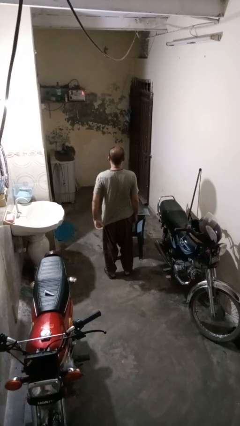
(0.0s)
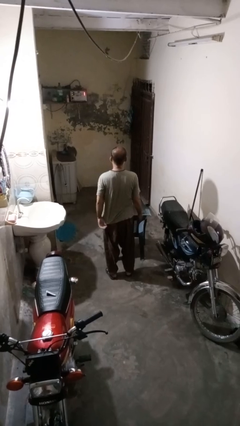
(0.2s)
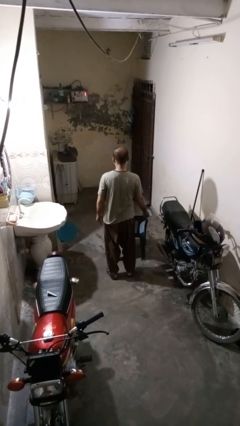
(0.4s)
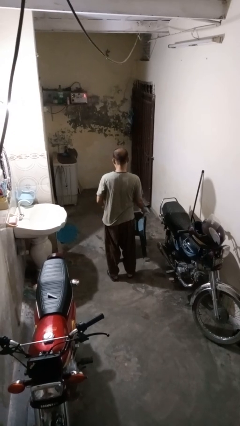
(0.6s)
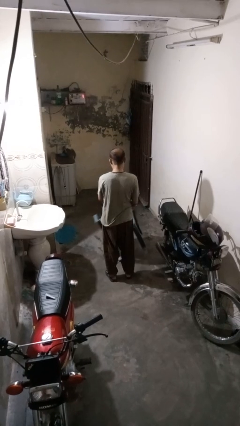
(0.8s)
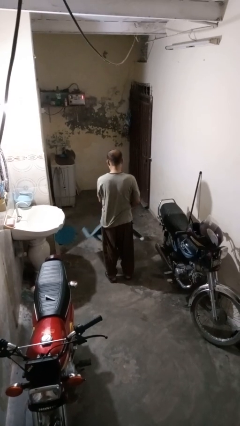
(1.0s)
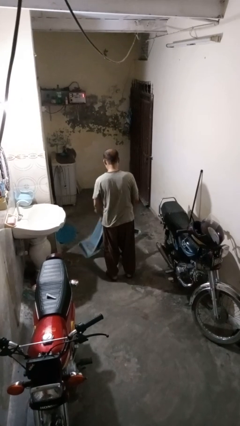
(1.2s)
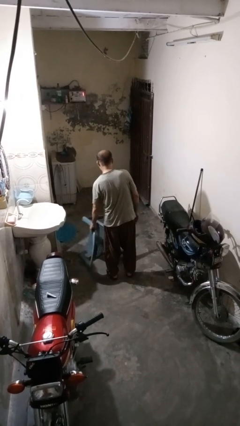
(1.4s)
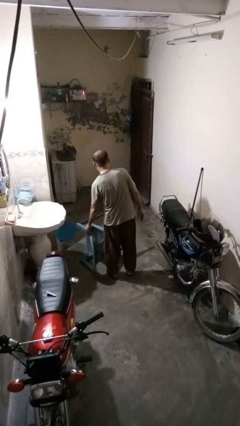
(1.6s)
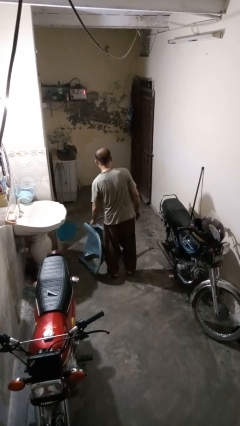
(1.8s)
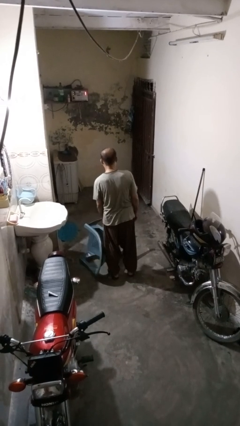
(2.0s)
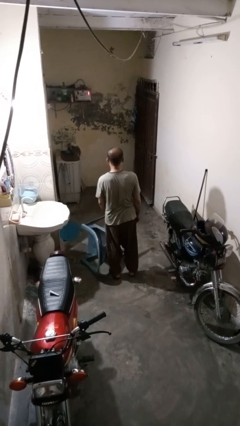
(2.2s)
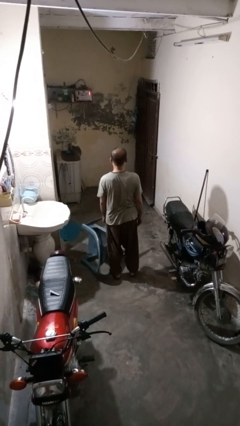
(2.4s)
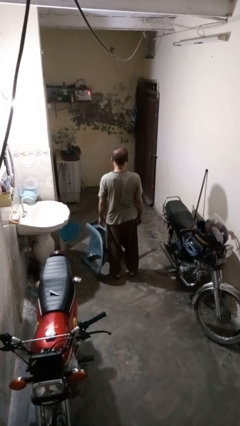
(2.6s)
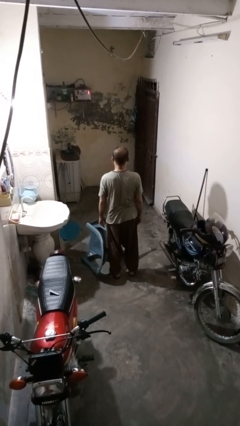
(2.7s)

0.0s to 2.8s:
person knocks over furniture

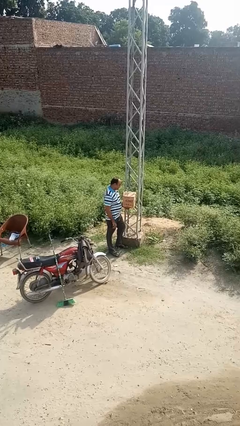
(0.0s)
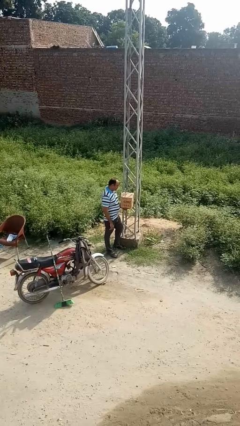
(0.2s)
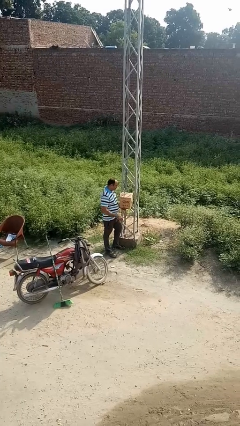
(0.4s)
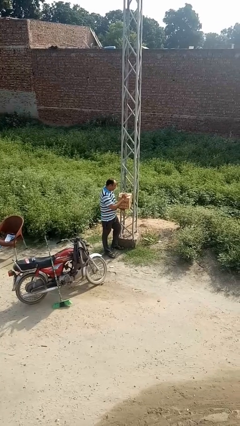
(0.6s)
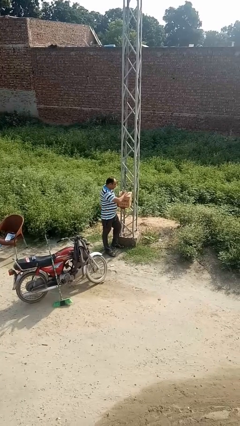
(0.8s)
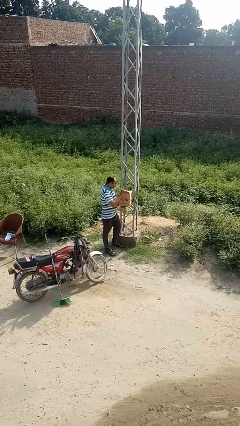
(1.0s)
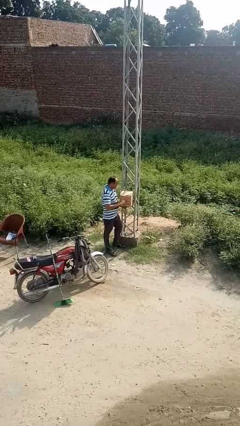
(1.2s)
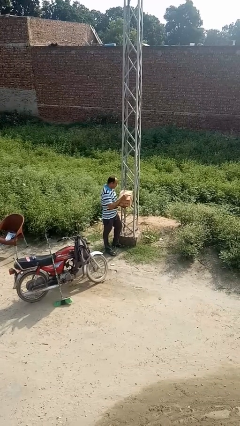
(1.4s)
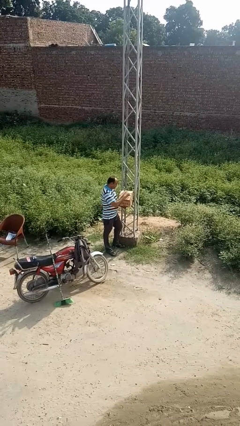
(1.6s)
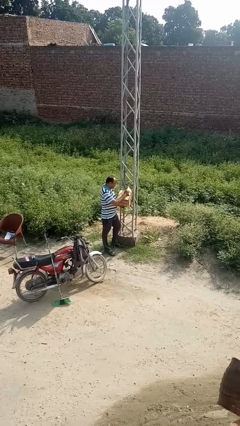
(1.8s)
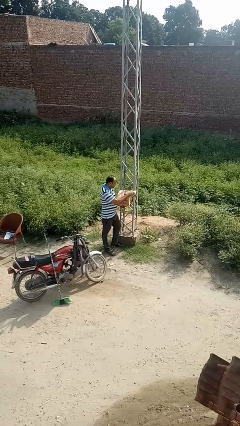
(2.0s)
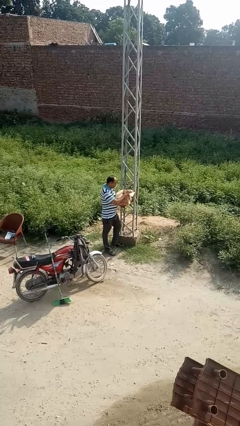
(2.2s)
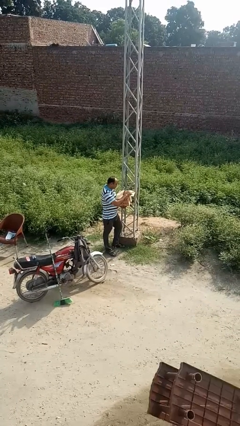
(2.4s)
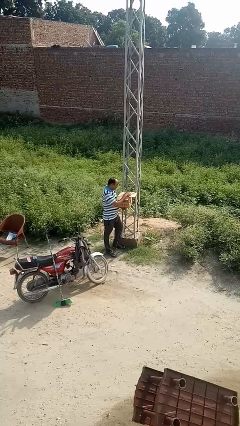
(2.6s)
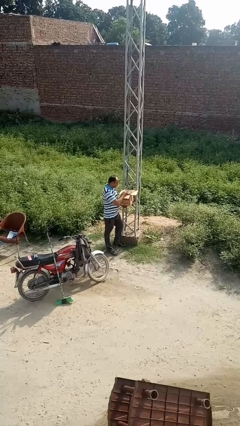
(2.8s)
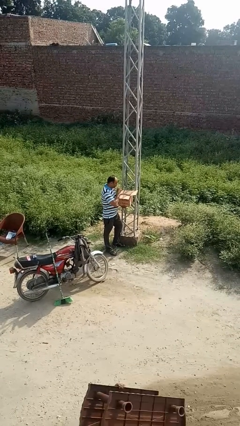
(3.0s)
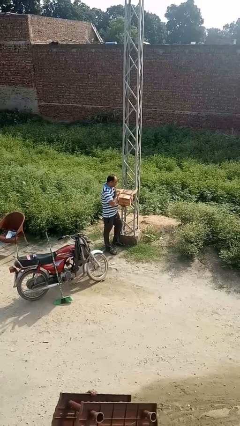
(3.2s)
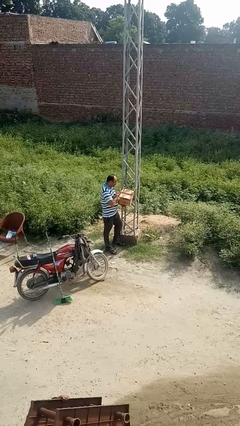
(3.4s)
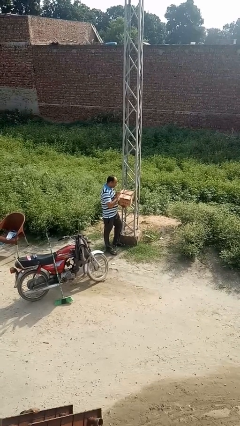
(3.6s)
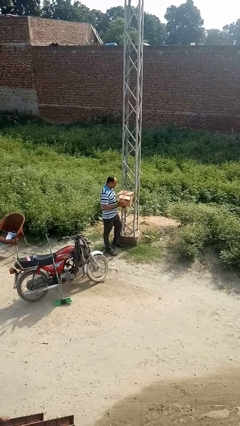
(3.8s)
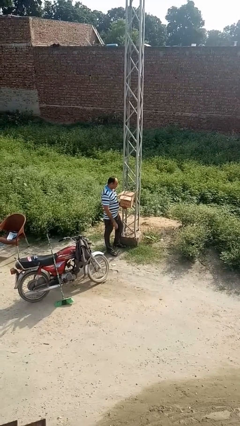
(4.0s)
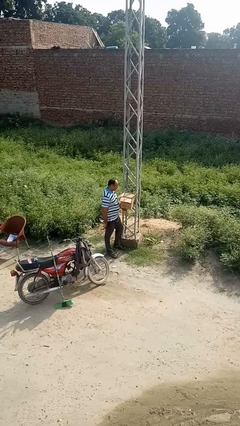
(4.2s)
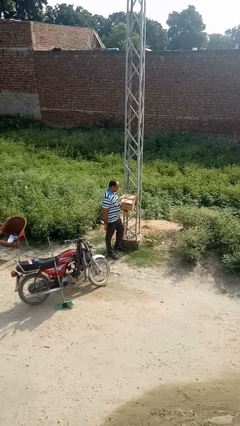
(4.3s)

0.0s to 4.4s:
person opens mailbox

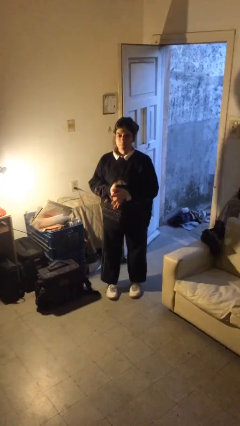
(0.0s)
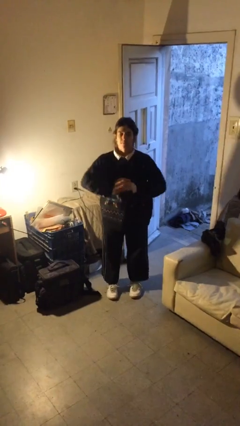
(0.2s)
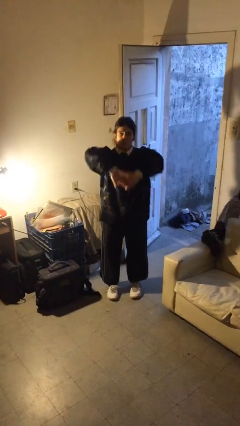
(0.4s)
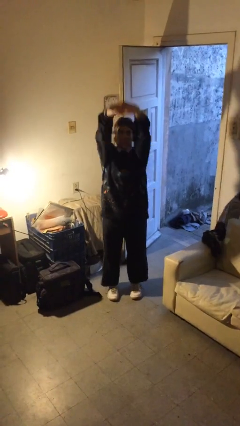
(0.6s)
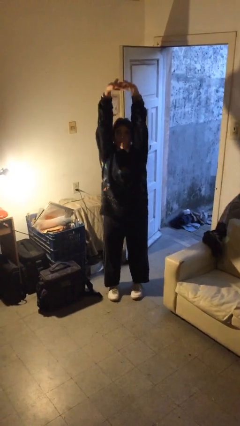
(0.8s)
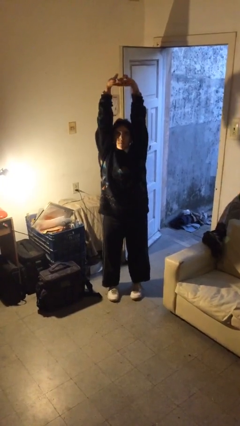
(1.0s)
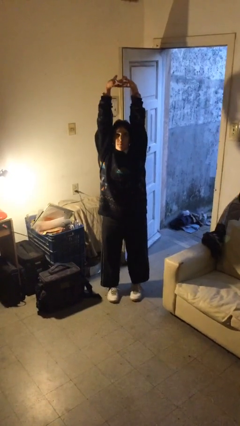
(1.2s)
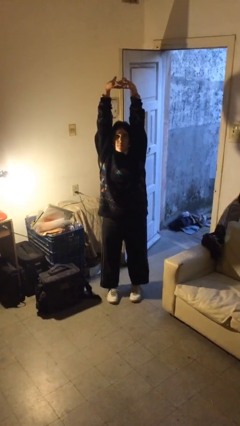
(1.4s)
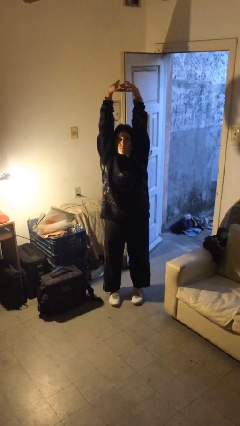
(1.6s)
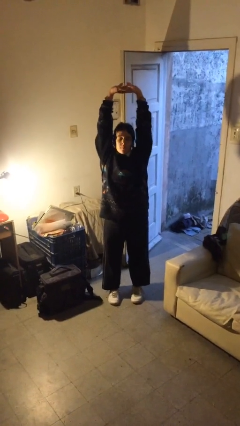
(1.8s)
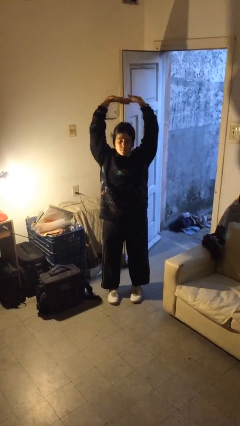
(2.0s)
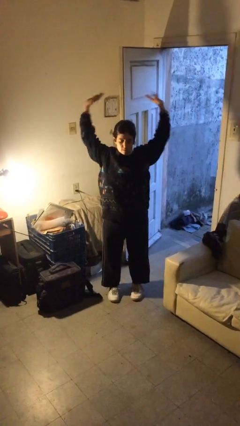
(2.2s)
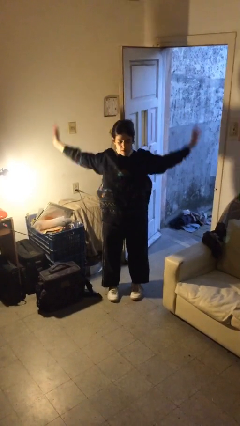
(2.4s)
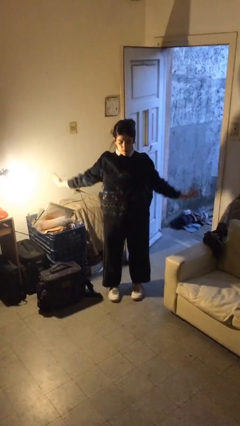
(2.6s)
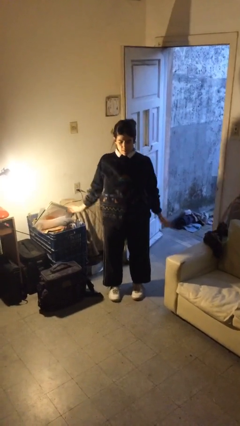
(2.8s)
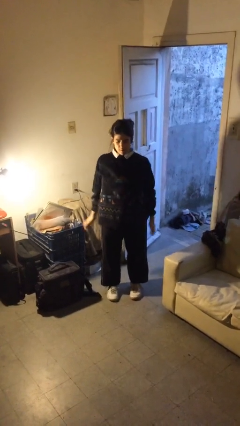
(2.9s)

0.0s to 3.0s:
person stretches arms over head

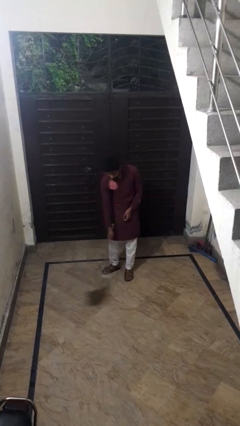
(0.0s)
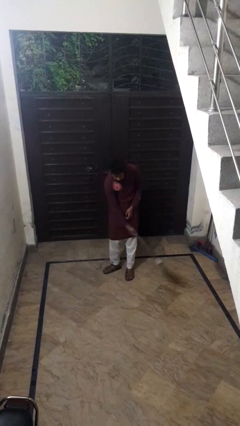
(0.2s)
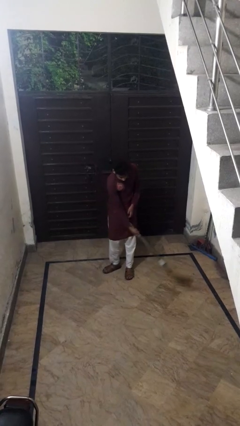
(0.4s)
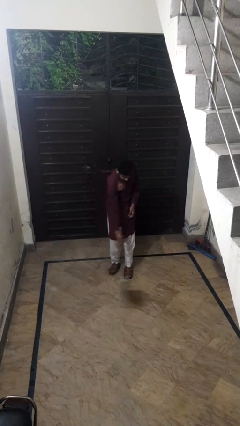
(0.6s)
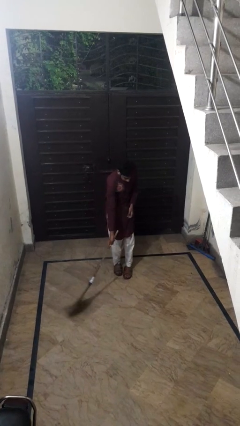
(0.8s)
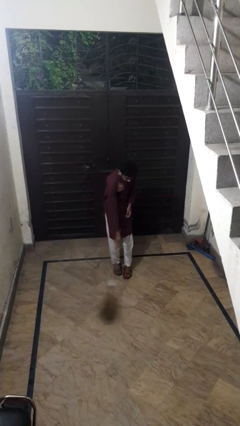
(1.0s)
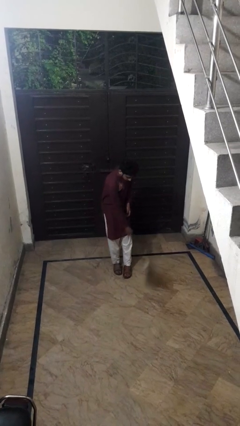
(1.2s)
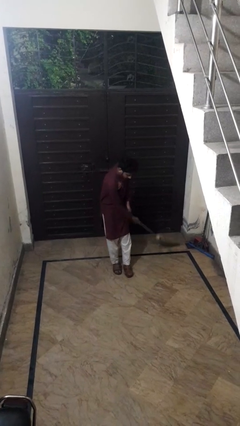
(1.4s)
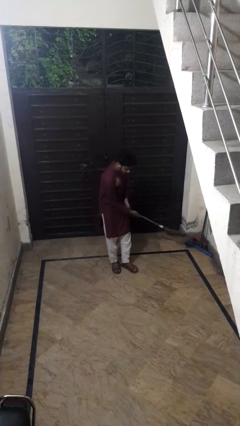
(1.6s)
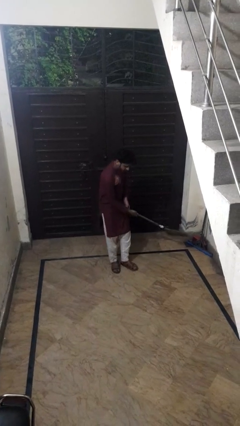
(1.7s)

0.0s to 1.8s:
person sweeps floor

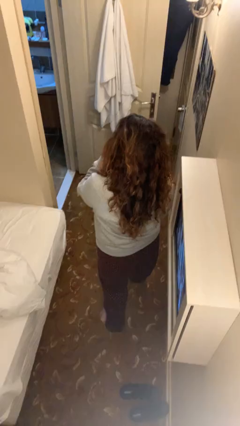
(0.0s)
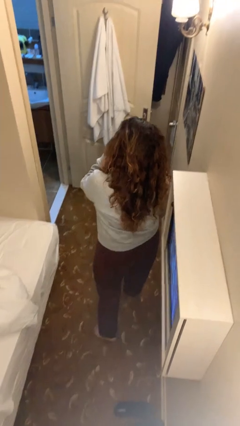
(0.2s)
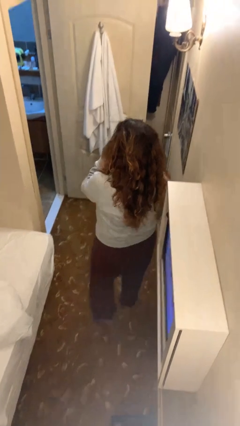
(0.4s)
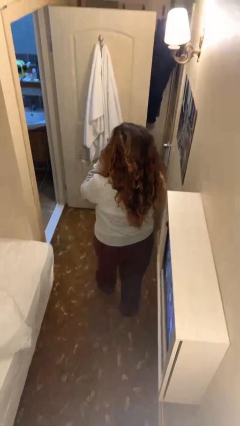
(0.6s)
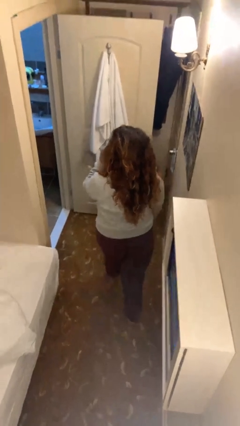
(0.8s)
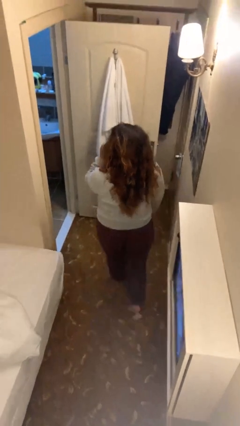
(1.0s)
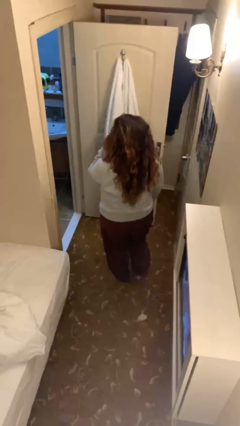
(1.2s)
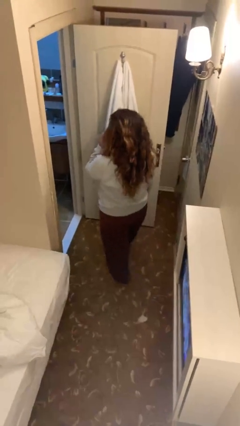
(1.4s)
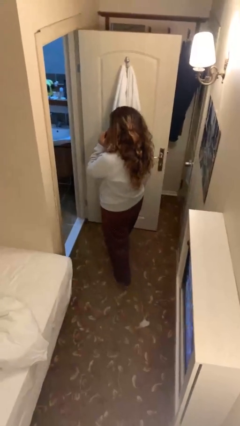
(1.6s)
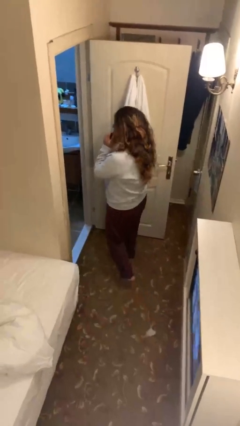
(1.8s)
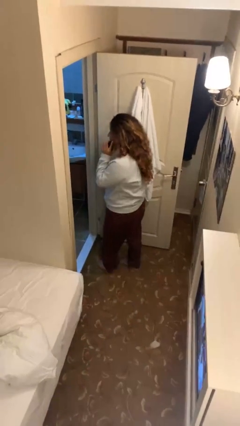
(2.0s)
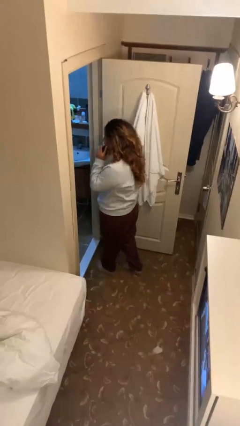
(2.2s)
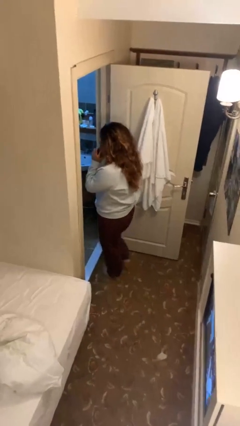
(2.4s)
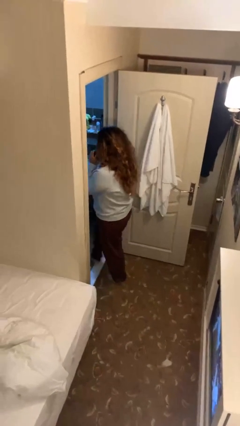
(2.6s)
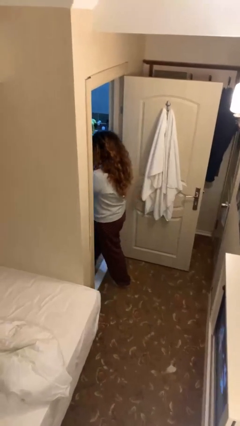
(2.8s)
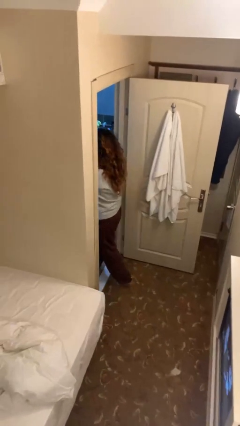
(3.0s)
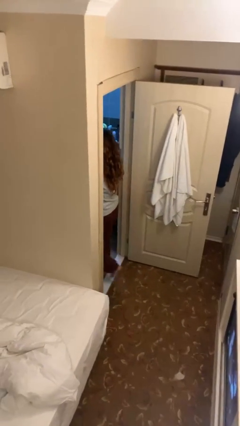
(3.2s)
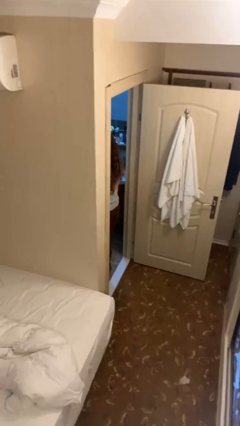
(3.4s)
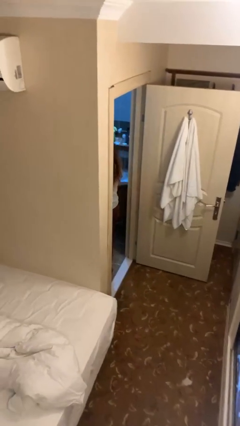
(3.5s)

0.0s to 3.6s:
person exits scene through structure

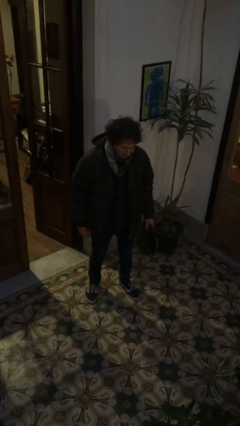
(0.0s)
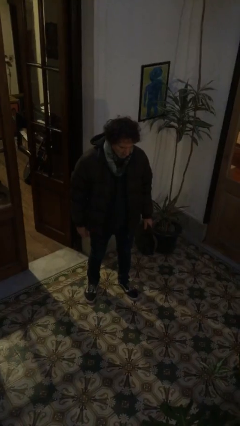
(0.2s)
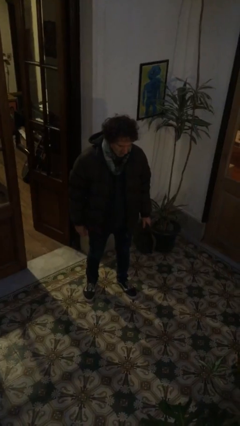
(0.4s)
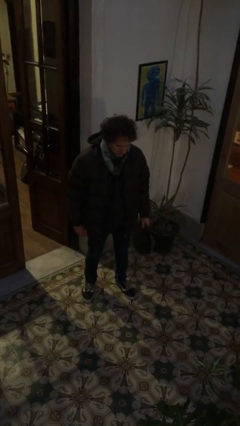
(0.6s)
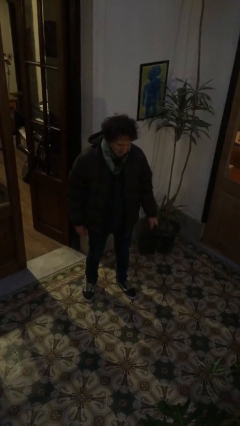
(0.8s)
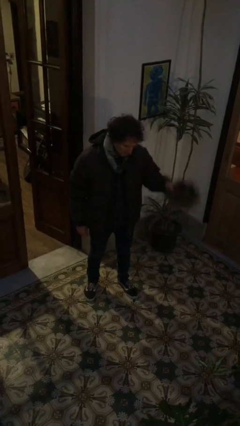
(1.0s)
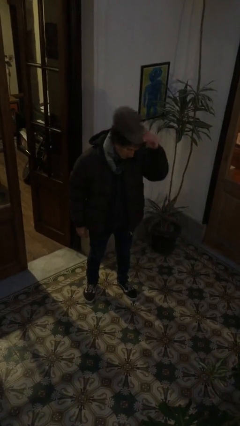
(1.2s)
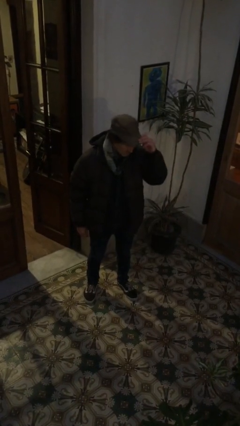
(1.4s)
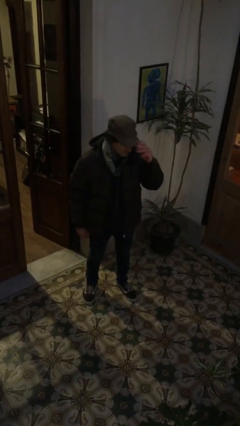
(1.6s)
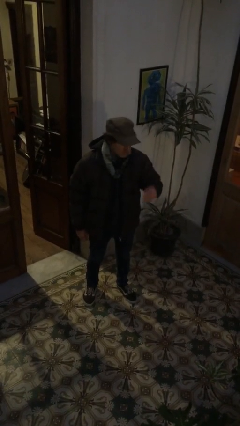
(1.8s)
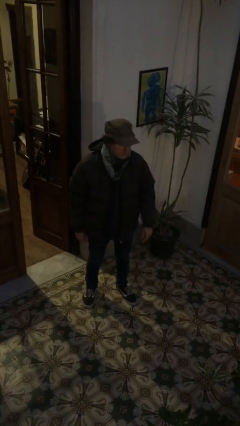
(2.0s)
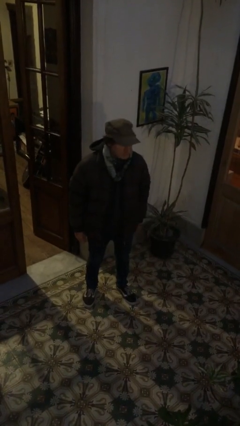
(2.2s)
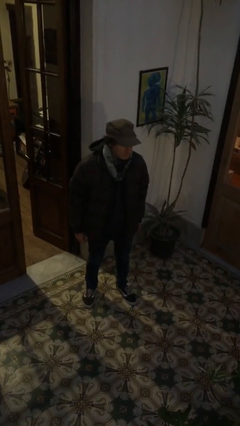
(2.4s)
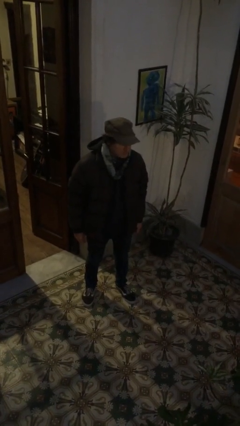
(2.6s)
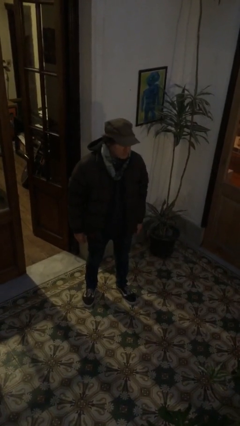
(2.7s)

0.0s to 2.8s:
person puts on hat
